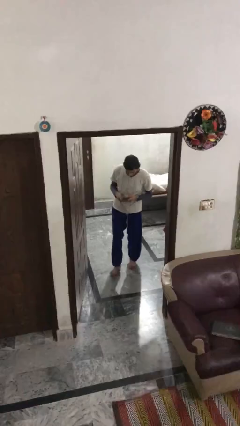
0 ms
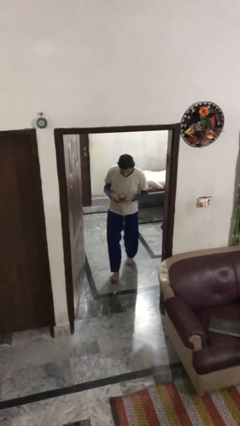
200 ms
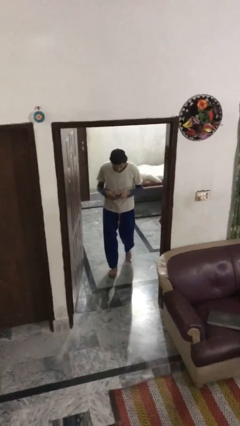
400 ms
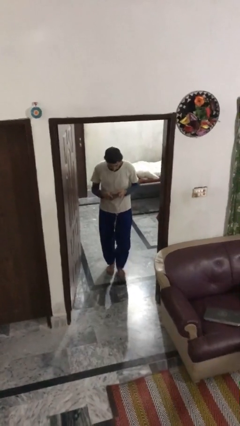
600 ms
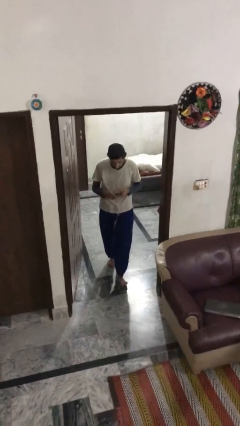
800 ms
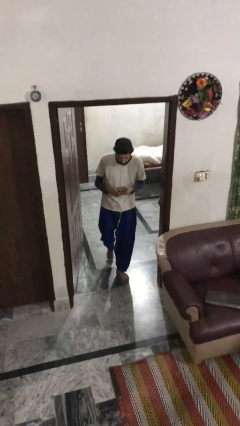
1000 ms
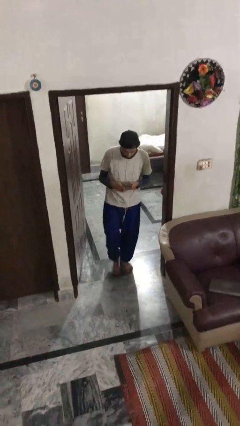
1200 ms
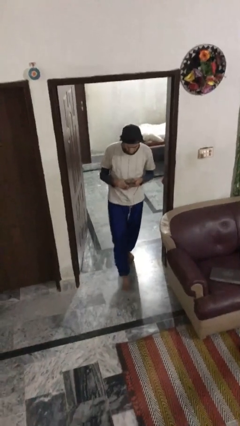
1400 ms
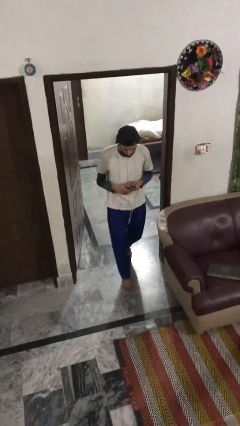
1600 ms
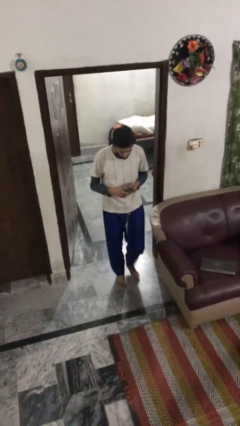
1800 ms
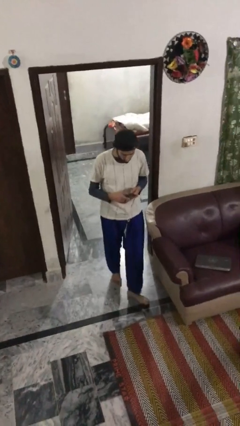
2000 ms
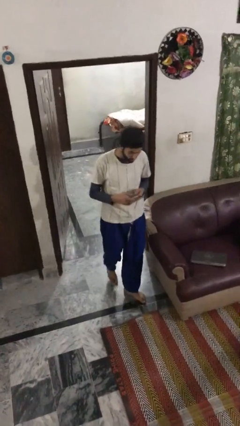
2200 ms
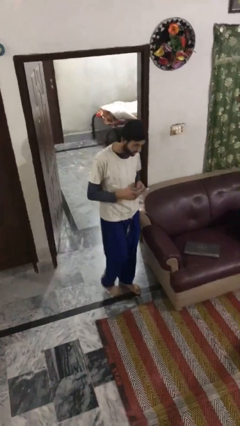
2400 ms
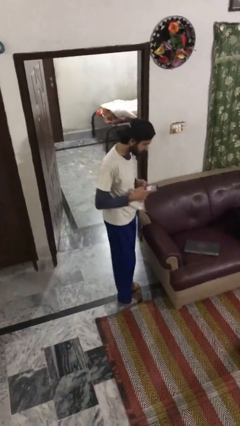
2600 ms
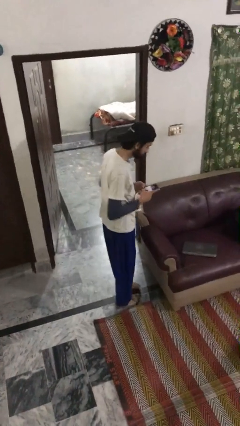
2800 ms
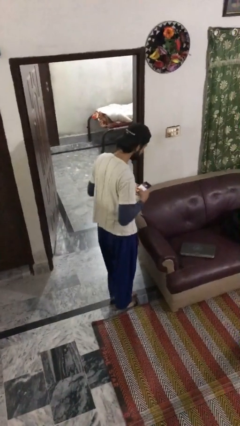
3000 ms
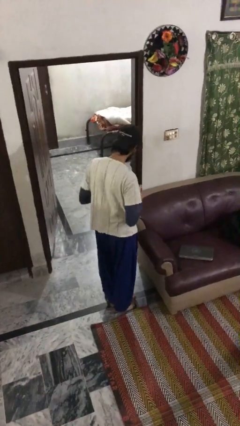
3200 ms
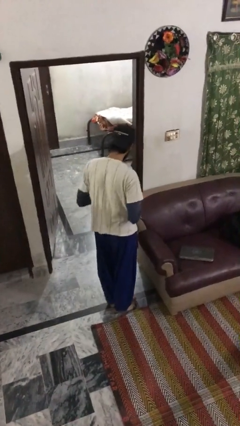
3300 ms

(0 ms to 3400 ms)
person enters scene through structure

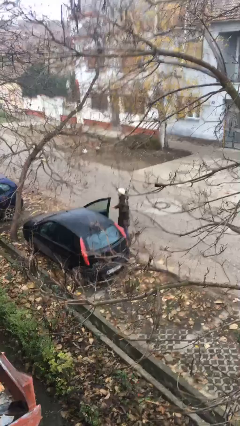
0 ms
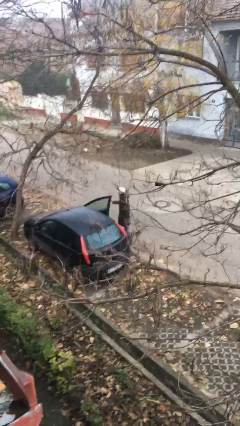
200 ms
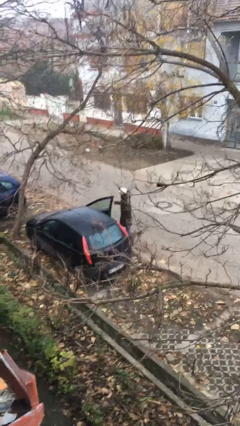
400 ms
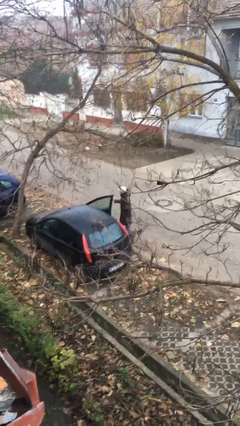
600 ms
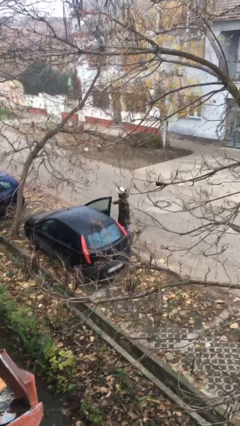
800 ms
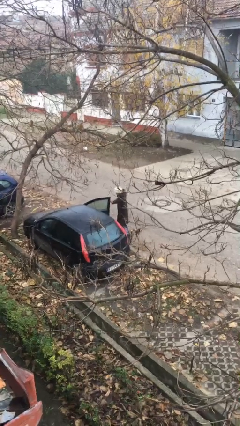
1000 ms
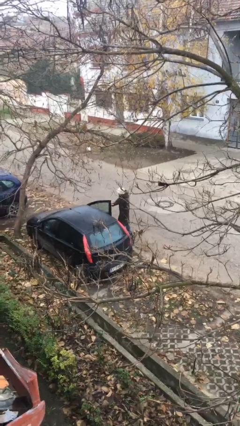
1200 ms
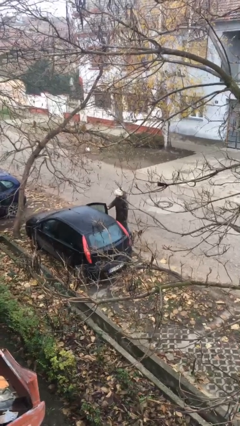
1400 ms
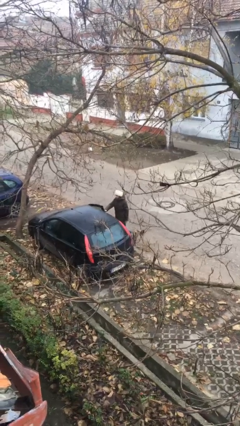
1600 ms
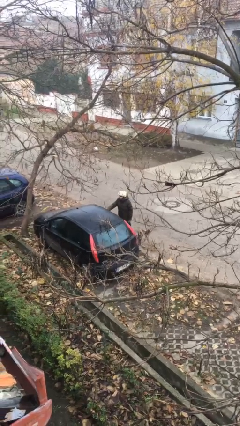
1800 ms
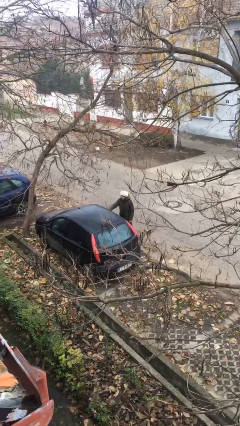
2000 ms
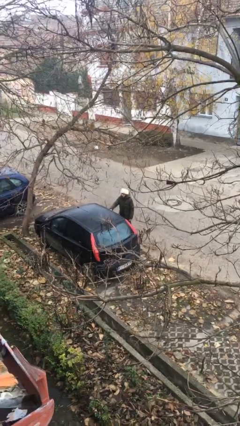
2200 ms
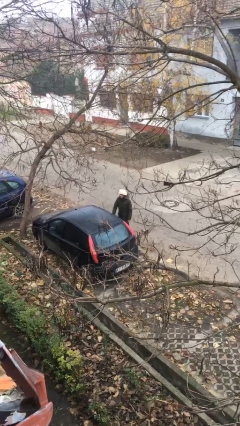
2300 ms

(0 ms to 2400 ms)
person closes car door

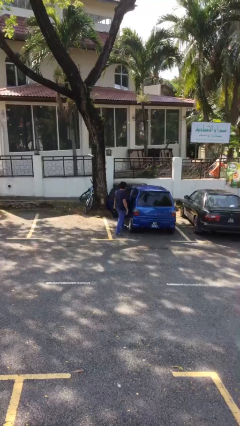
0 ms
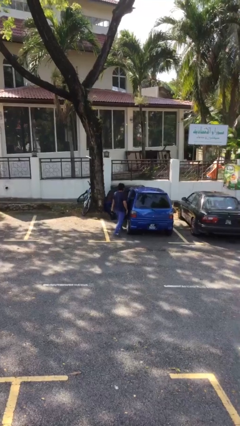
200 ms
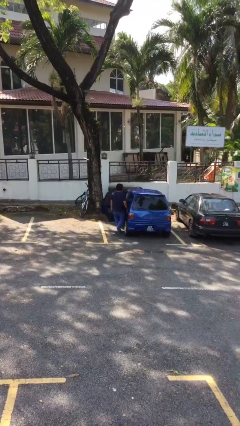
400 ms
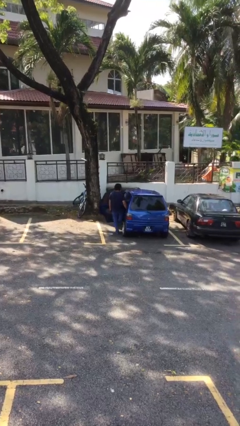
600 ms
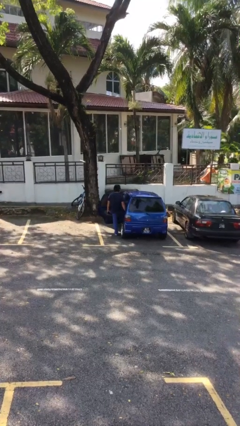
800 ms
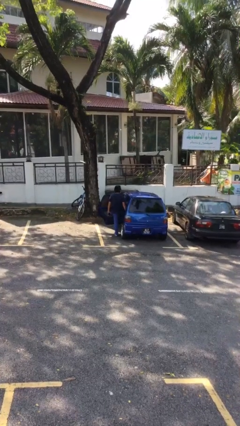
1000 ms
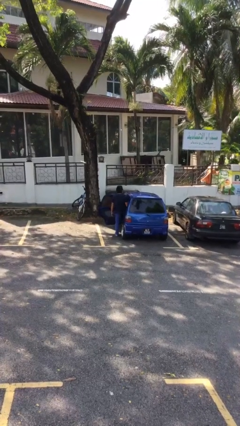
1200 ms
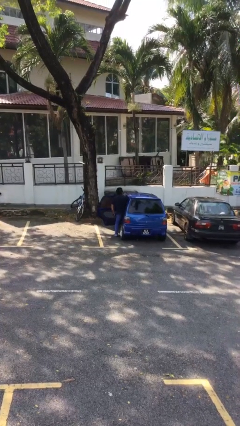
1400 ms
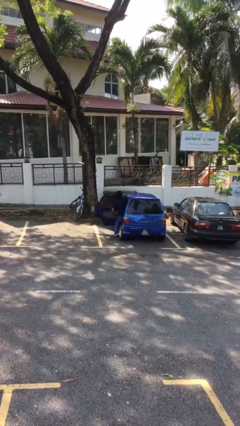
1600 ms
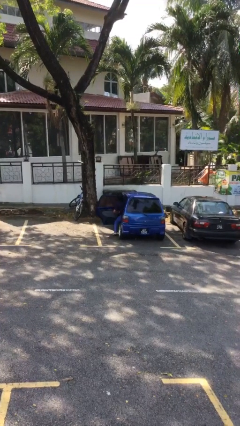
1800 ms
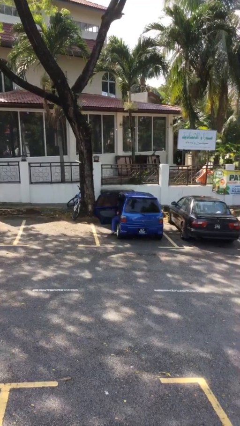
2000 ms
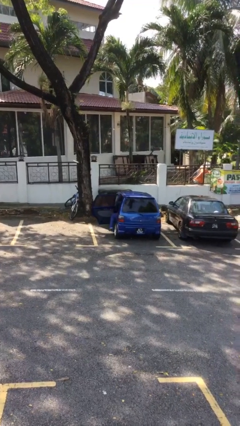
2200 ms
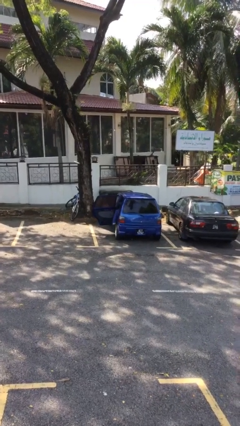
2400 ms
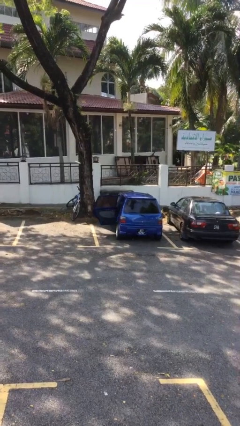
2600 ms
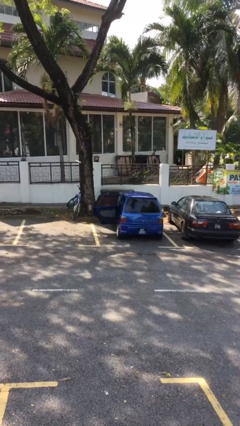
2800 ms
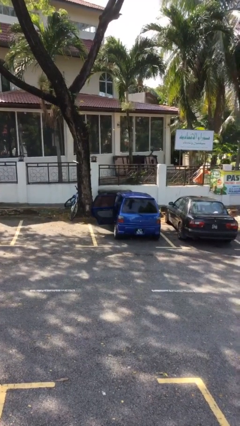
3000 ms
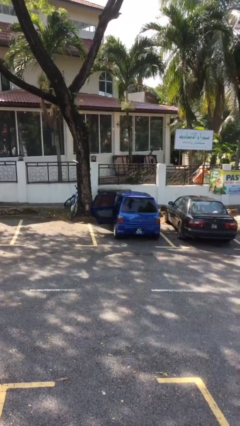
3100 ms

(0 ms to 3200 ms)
person enters car

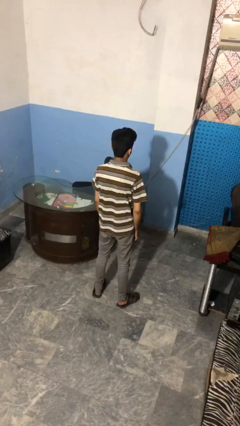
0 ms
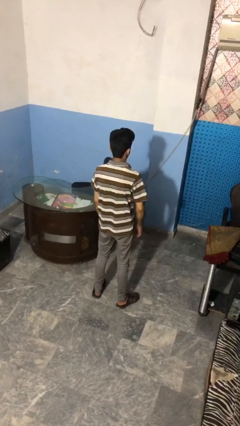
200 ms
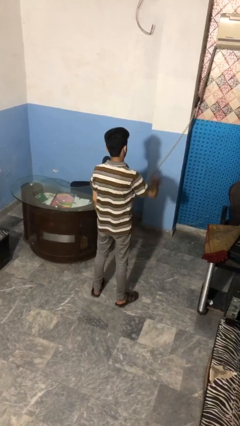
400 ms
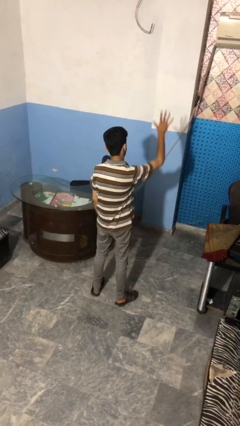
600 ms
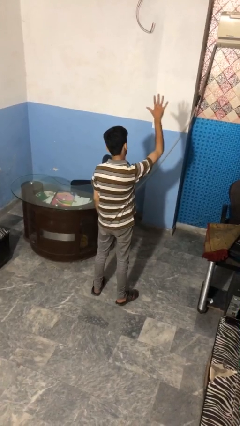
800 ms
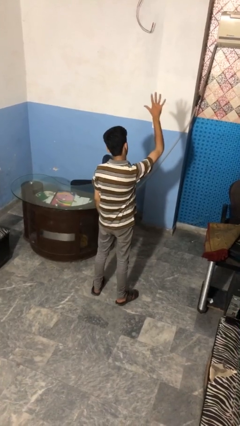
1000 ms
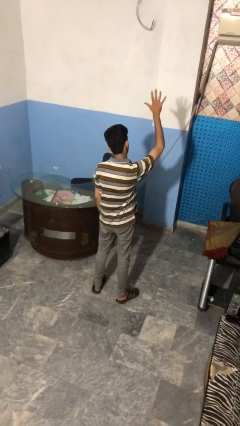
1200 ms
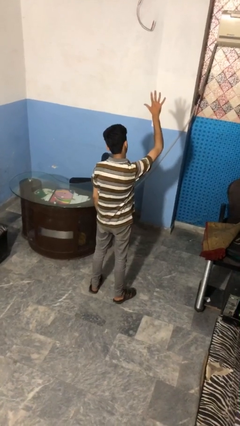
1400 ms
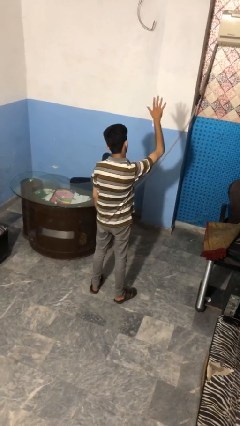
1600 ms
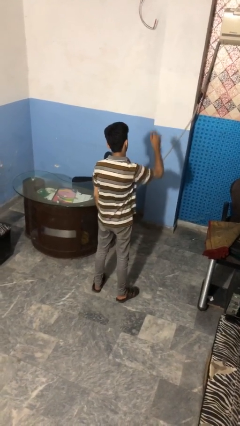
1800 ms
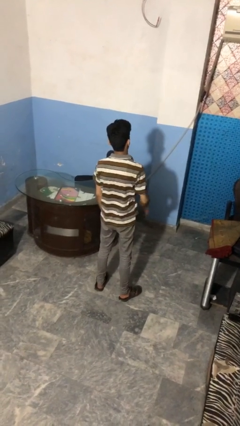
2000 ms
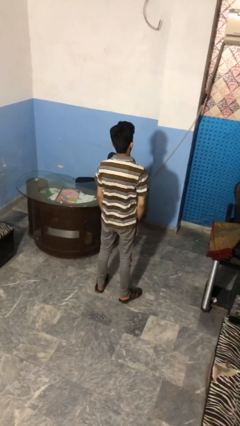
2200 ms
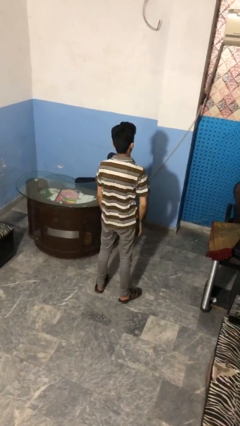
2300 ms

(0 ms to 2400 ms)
person gestures number five

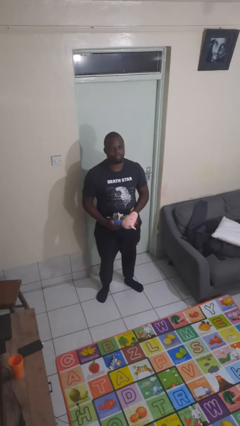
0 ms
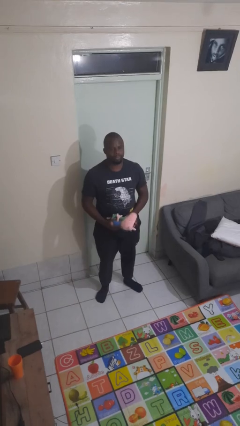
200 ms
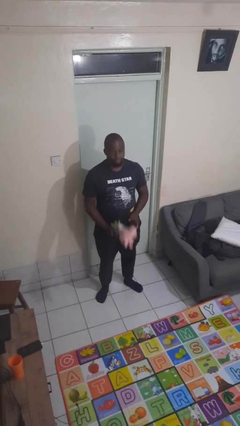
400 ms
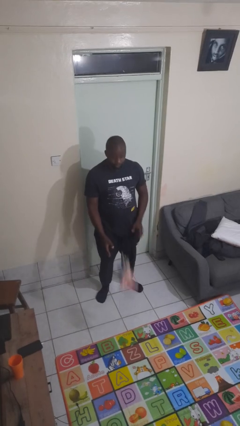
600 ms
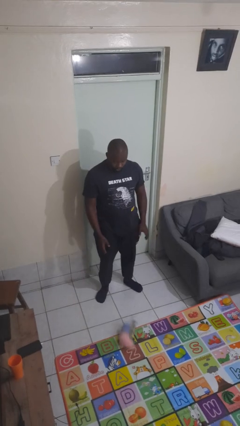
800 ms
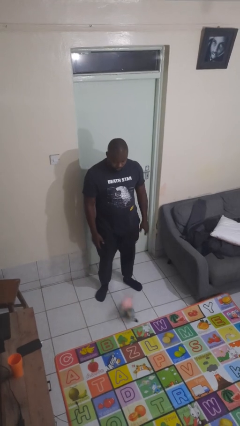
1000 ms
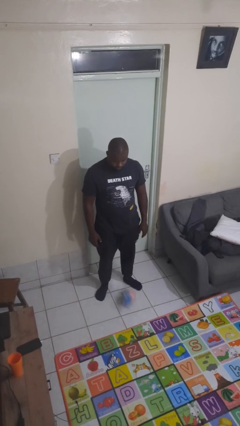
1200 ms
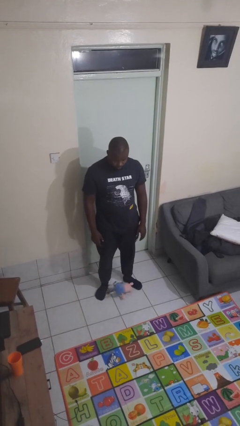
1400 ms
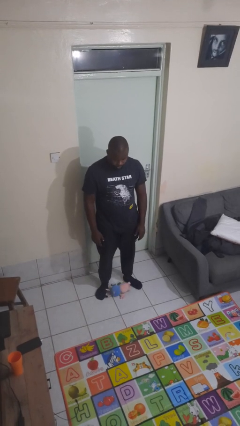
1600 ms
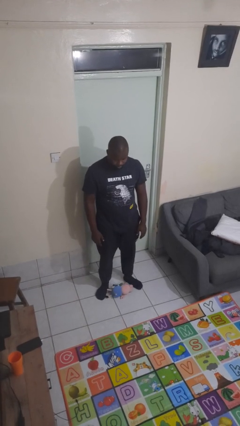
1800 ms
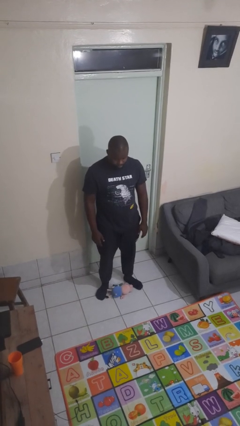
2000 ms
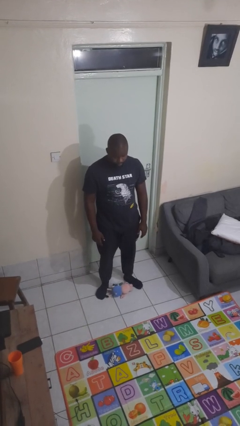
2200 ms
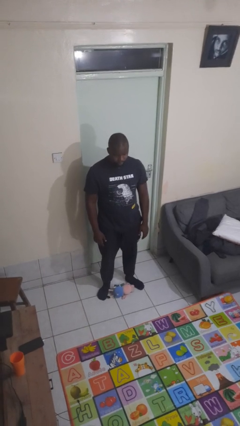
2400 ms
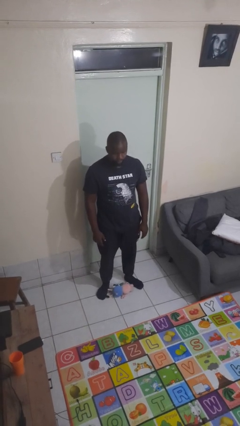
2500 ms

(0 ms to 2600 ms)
person drops object

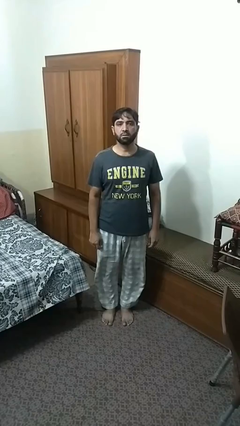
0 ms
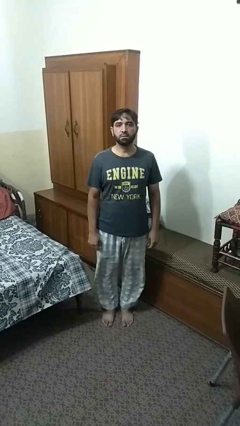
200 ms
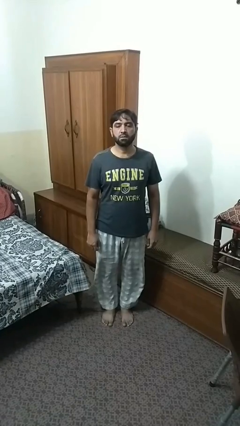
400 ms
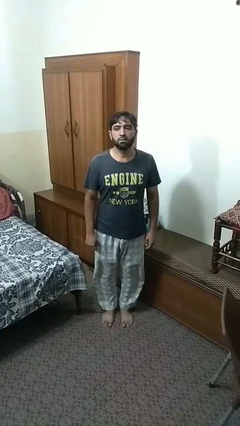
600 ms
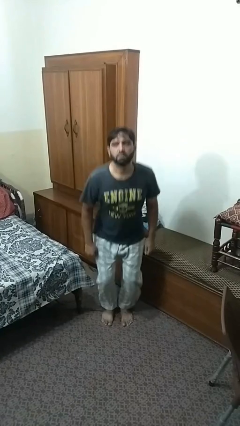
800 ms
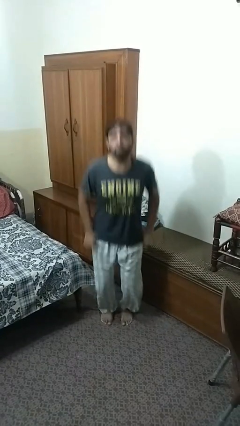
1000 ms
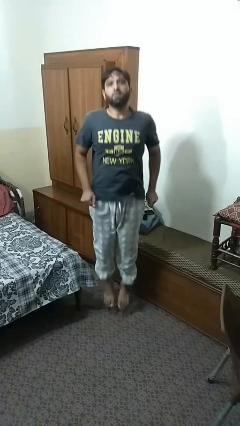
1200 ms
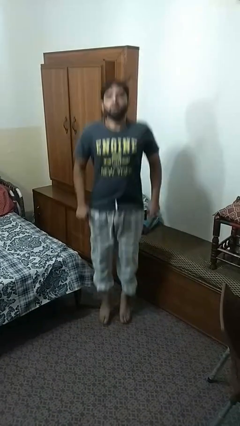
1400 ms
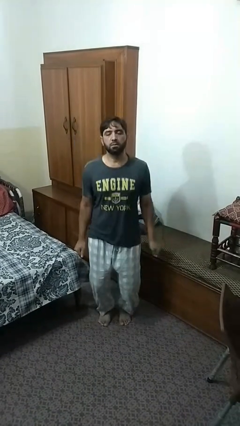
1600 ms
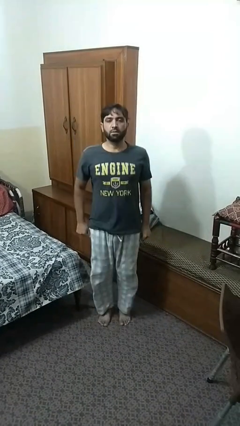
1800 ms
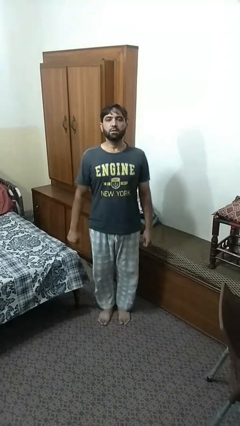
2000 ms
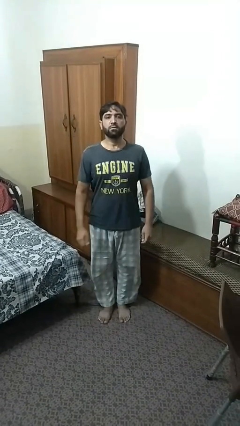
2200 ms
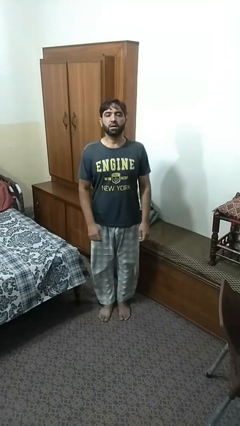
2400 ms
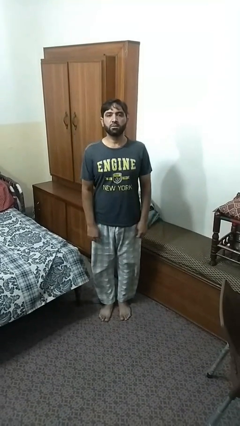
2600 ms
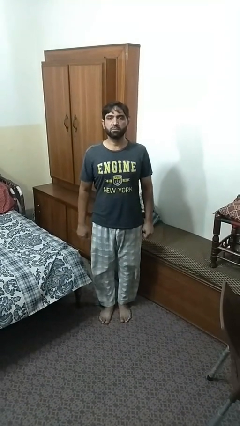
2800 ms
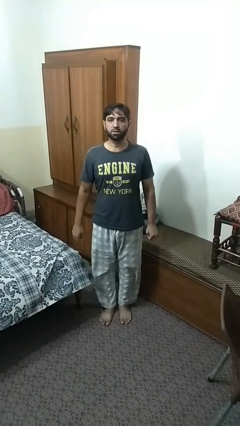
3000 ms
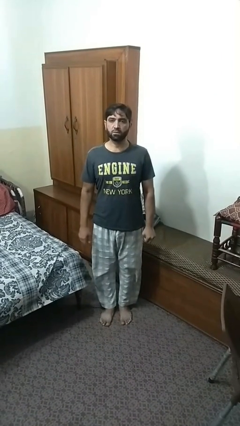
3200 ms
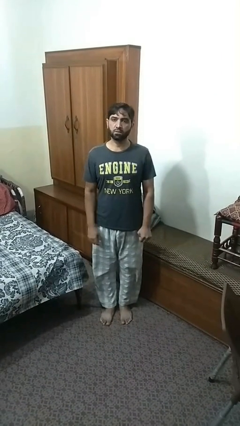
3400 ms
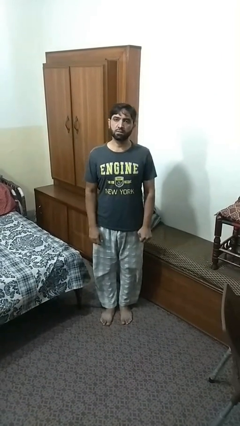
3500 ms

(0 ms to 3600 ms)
person jumps

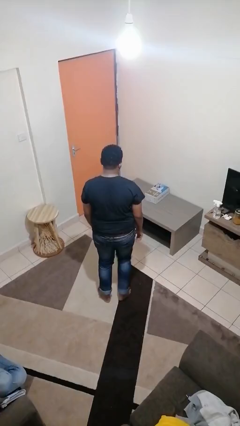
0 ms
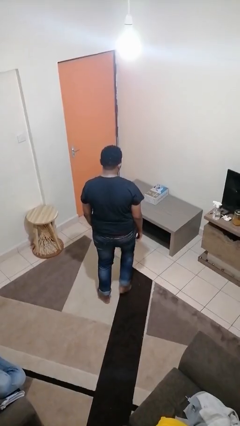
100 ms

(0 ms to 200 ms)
person throws object on table
